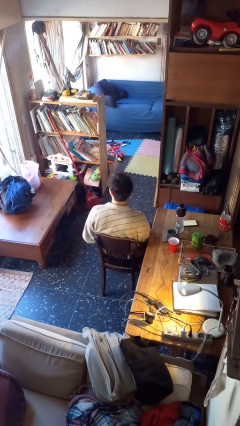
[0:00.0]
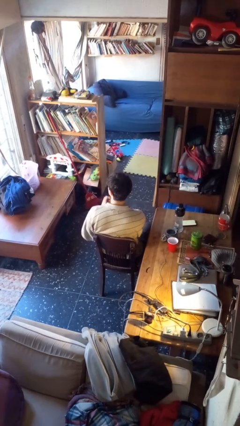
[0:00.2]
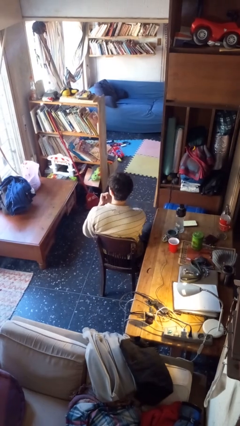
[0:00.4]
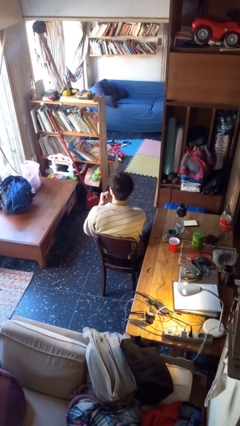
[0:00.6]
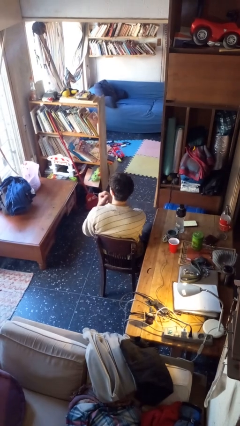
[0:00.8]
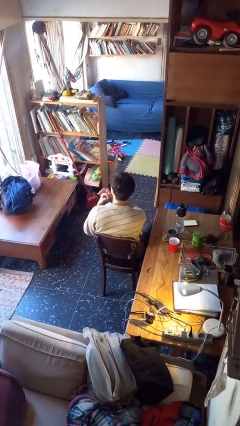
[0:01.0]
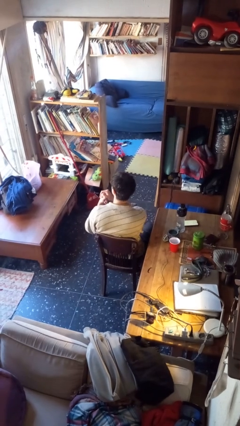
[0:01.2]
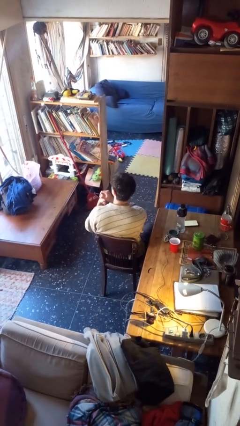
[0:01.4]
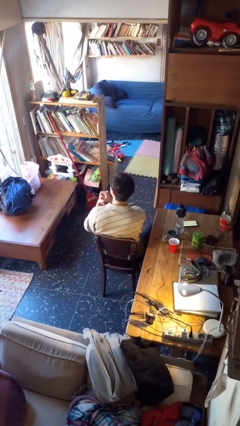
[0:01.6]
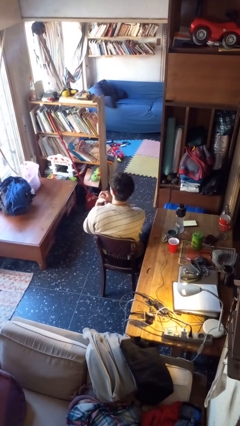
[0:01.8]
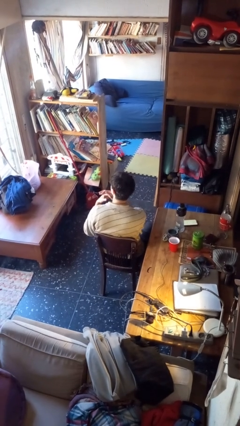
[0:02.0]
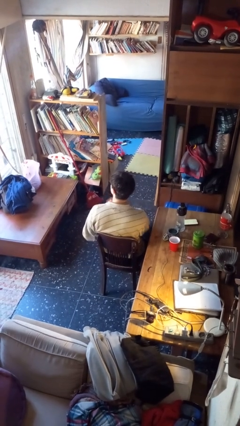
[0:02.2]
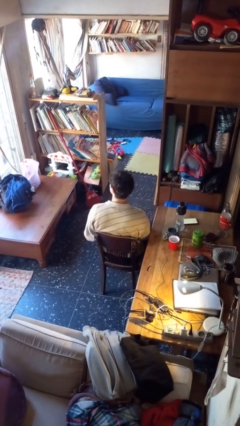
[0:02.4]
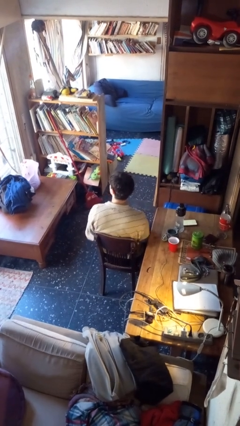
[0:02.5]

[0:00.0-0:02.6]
person snaps fingers

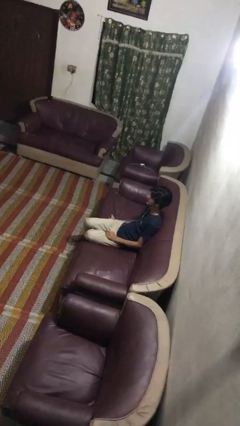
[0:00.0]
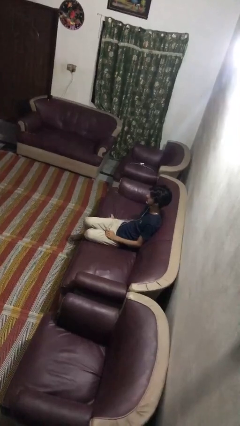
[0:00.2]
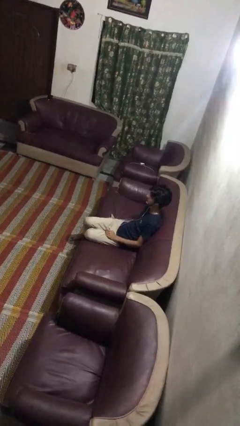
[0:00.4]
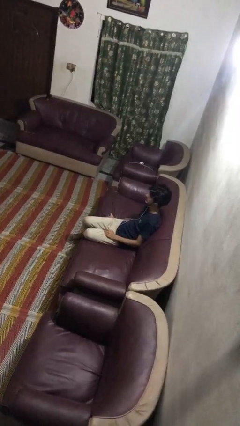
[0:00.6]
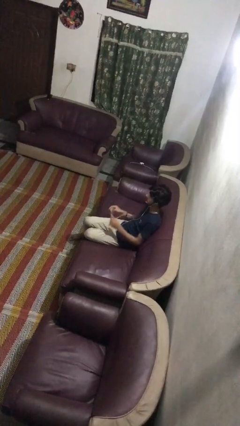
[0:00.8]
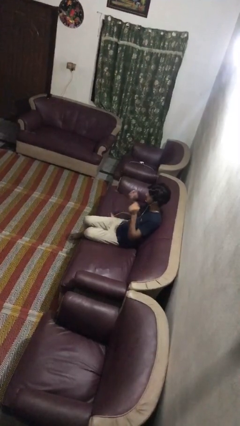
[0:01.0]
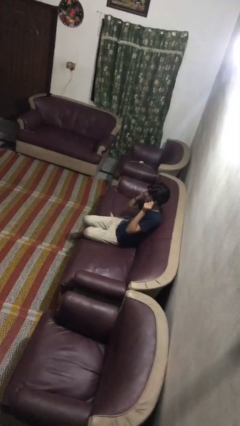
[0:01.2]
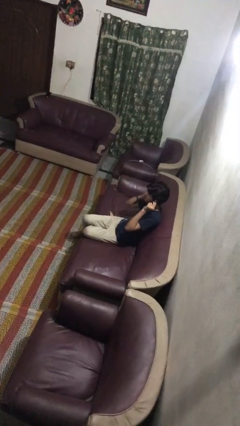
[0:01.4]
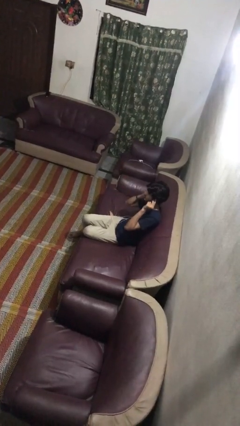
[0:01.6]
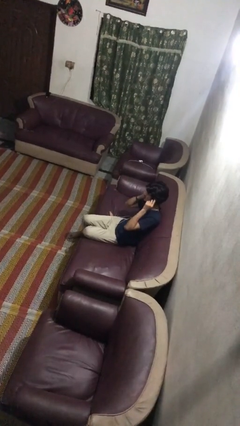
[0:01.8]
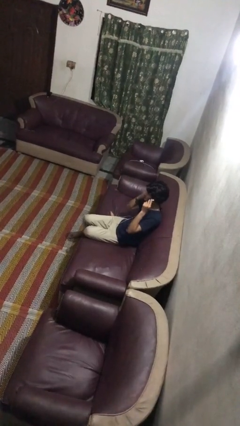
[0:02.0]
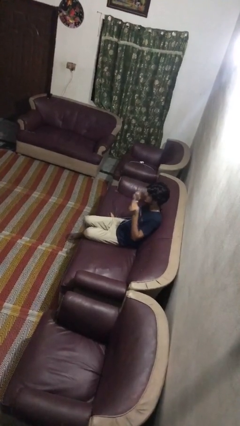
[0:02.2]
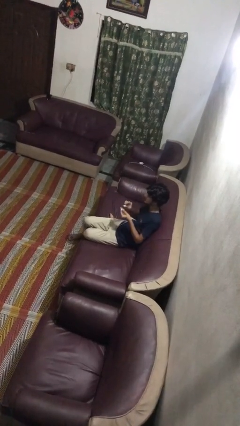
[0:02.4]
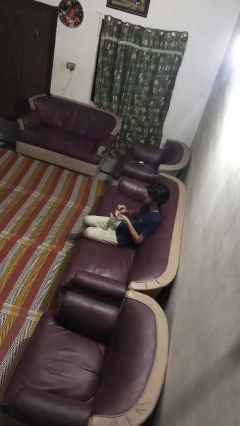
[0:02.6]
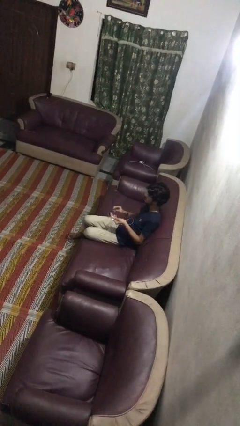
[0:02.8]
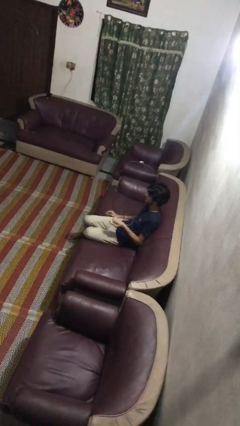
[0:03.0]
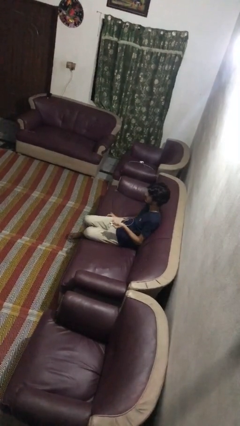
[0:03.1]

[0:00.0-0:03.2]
person takes off headphones

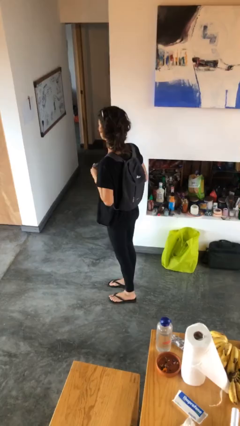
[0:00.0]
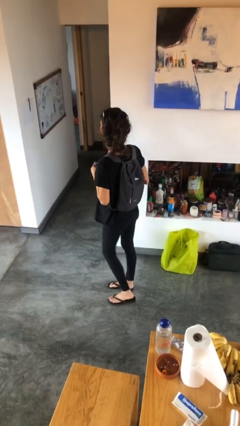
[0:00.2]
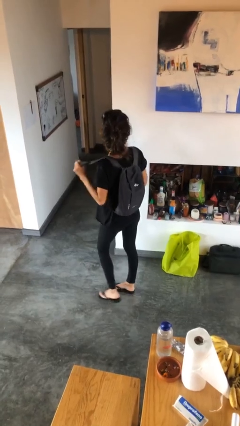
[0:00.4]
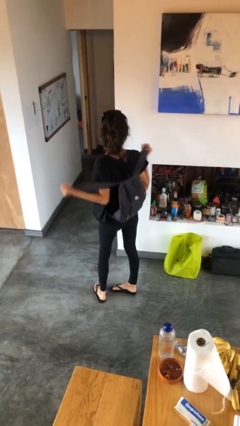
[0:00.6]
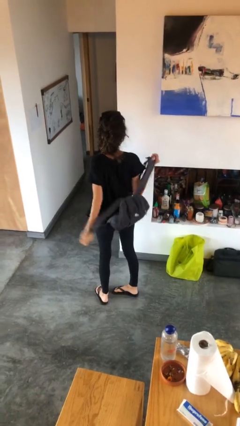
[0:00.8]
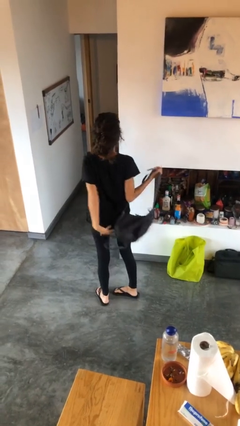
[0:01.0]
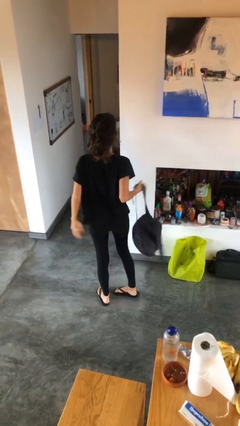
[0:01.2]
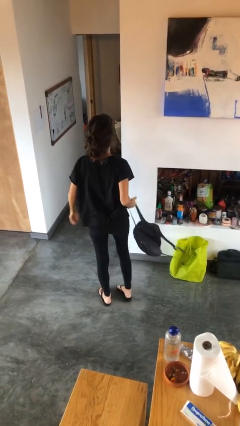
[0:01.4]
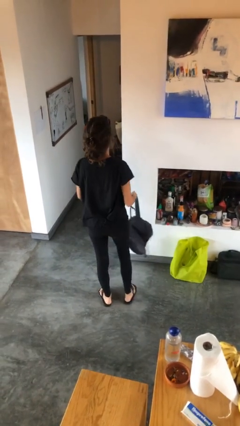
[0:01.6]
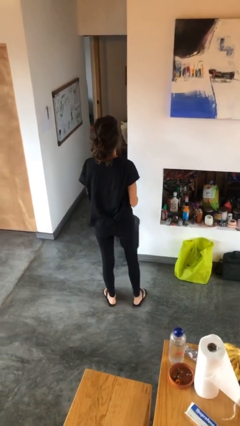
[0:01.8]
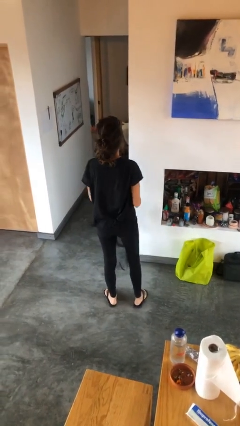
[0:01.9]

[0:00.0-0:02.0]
person takes off backpack

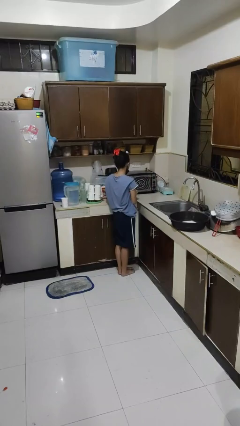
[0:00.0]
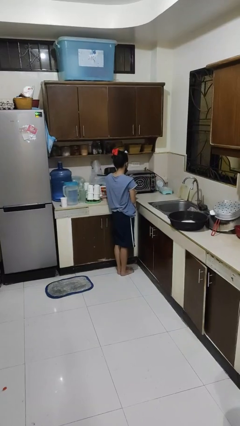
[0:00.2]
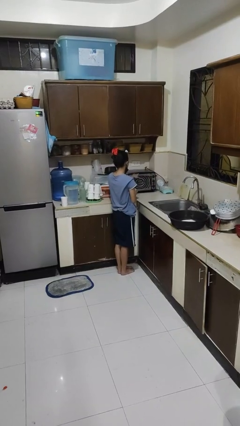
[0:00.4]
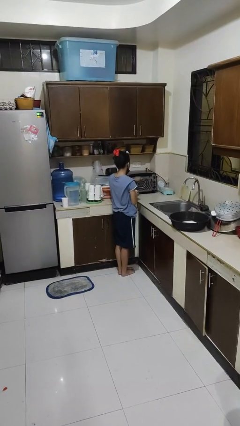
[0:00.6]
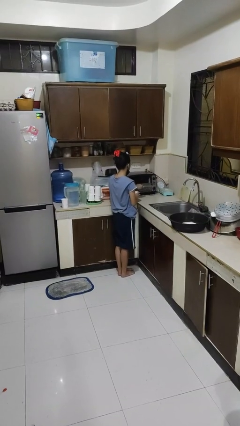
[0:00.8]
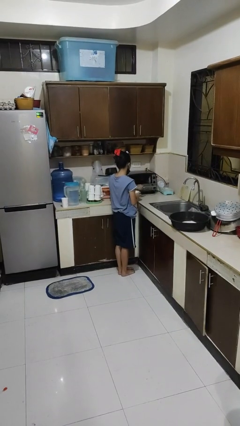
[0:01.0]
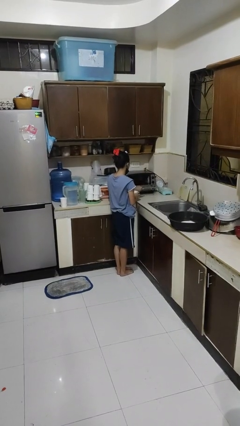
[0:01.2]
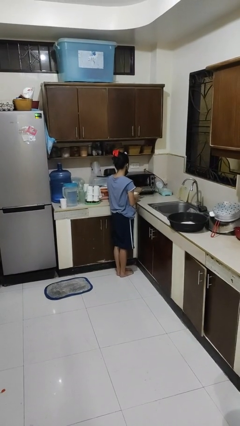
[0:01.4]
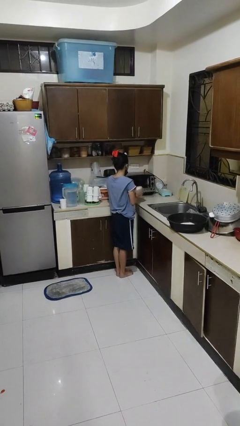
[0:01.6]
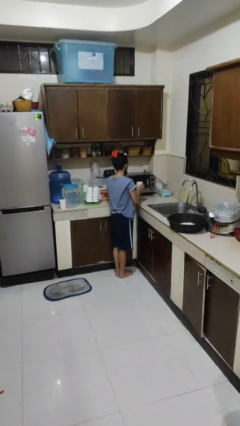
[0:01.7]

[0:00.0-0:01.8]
person opens microwave

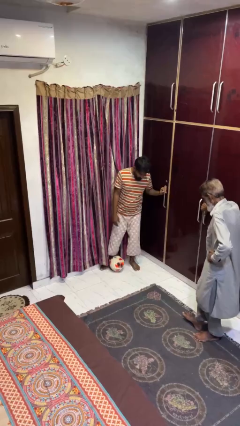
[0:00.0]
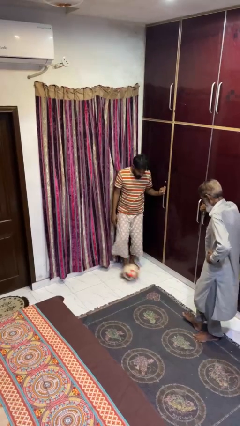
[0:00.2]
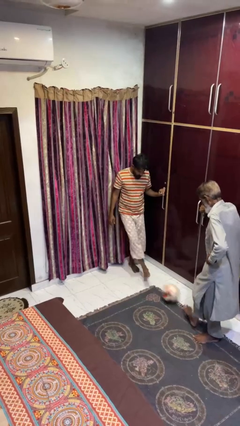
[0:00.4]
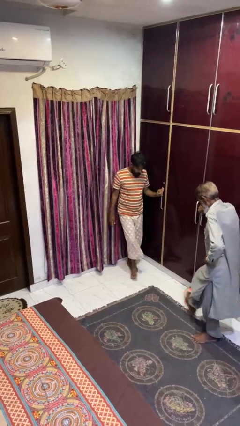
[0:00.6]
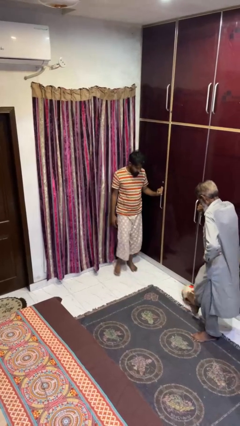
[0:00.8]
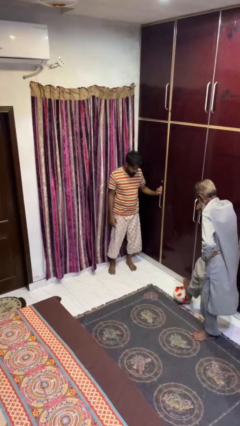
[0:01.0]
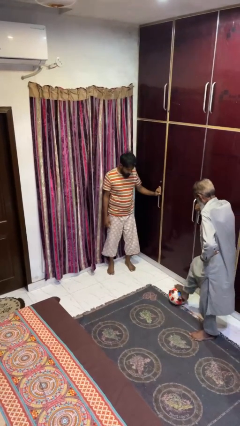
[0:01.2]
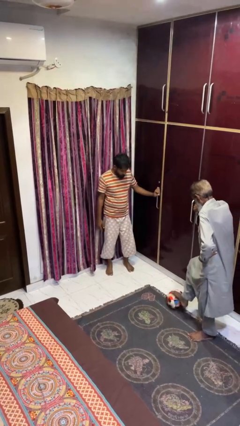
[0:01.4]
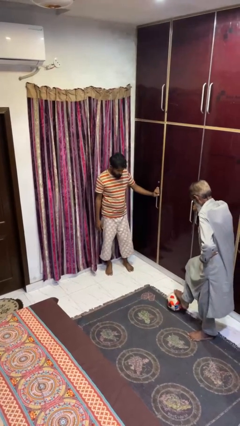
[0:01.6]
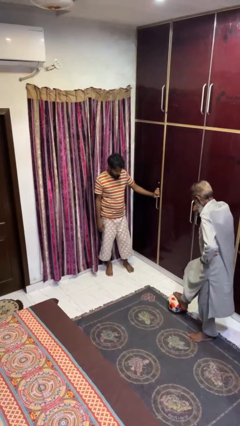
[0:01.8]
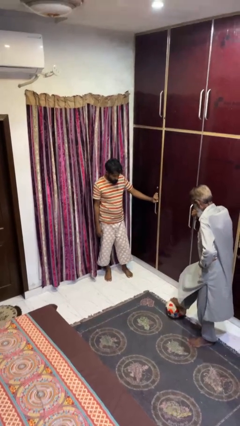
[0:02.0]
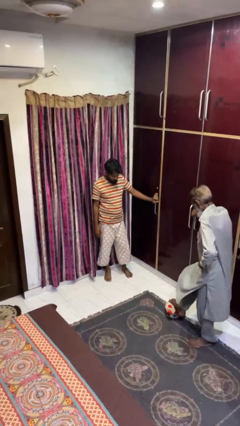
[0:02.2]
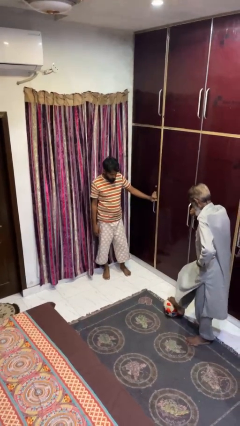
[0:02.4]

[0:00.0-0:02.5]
person kicks object to person

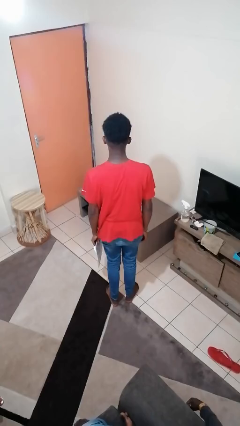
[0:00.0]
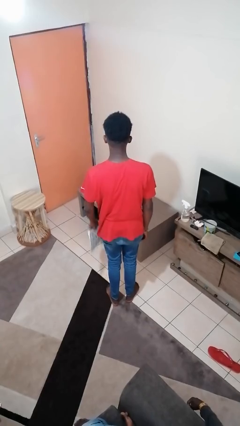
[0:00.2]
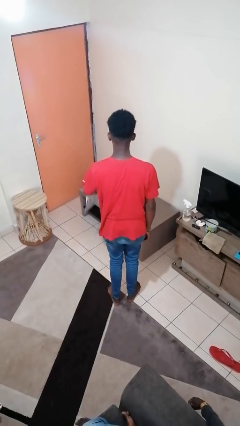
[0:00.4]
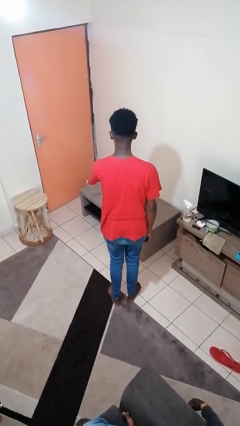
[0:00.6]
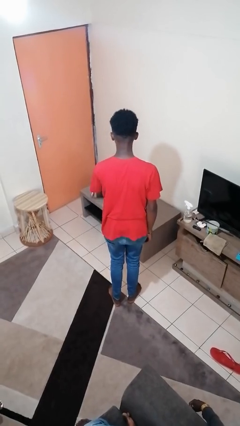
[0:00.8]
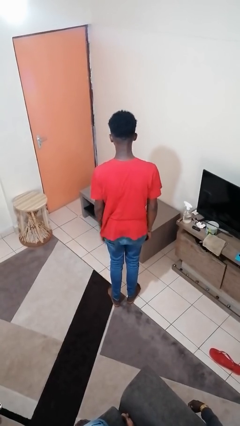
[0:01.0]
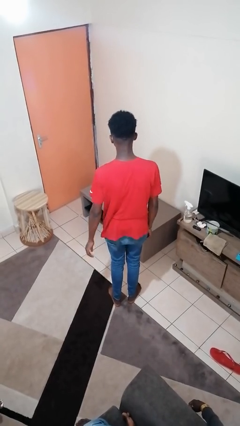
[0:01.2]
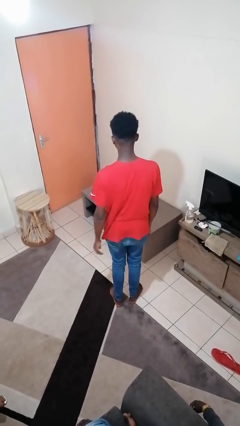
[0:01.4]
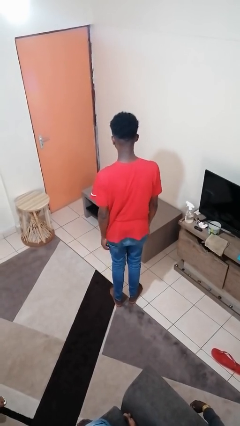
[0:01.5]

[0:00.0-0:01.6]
person throws object on table

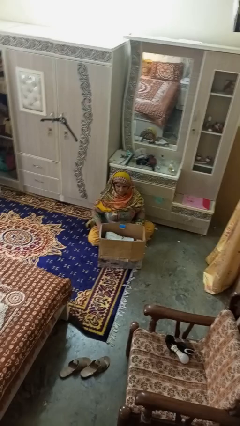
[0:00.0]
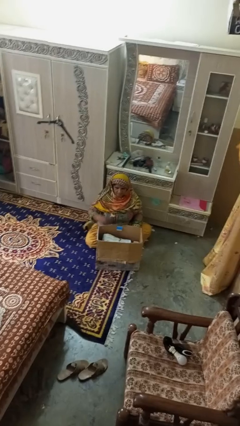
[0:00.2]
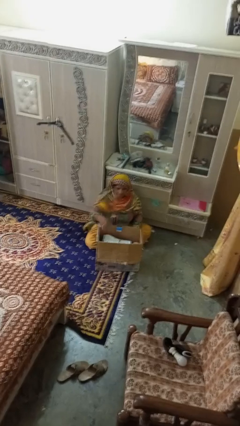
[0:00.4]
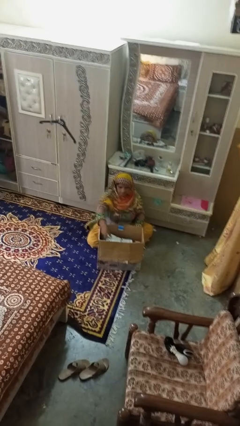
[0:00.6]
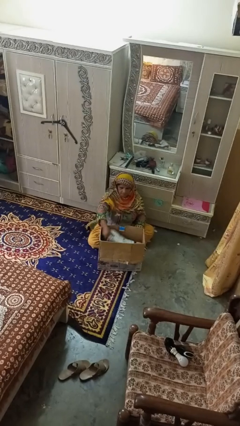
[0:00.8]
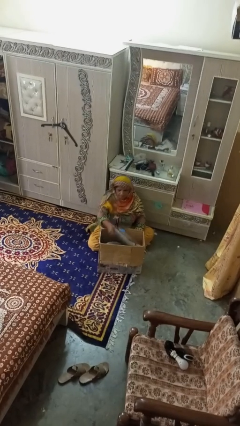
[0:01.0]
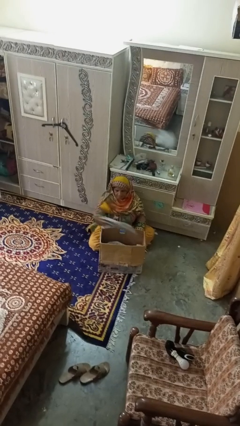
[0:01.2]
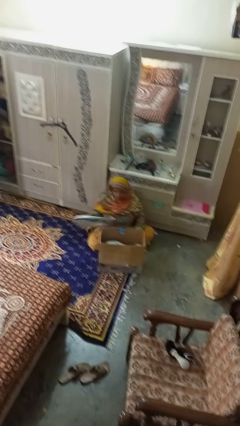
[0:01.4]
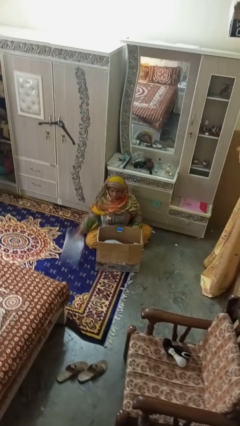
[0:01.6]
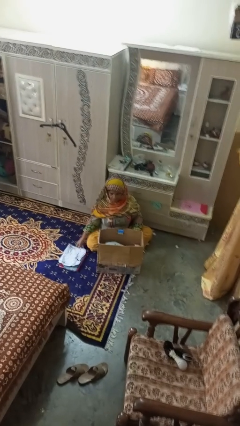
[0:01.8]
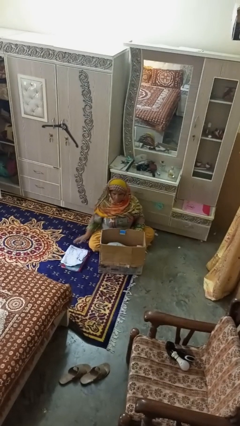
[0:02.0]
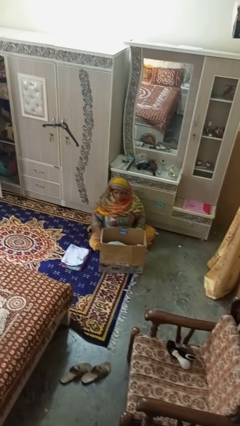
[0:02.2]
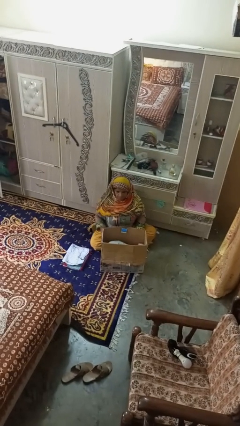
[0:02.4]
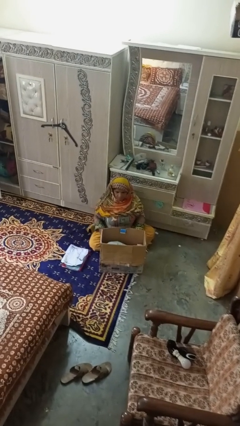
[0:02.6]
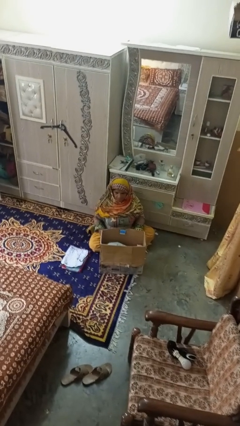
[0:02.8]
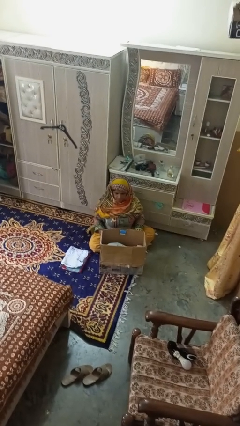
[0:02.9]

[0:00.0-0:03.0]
person takes object from box
